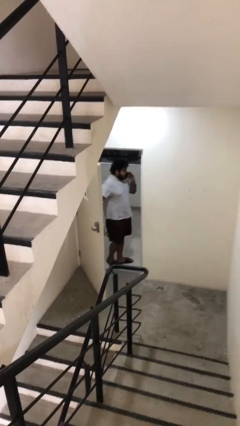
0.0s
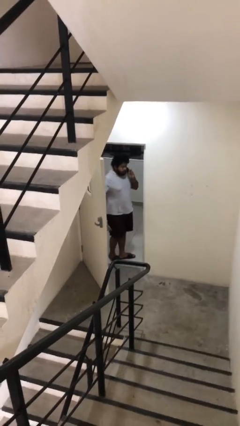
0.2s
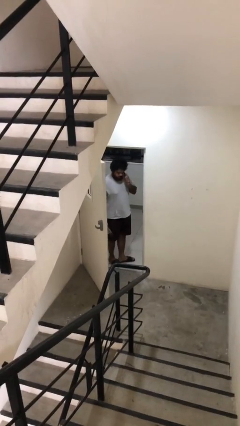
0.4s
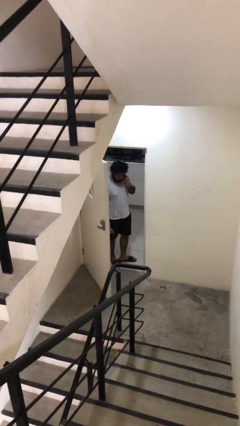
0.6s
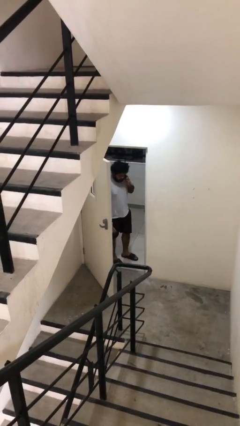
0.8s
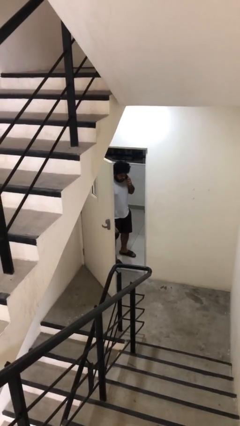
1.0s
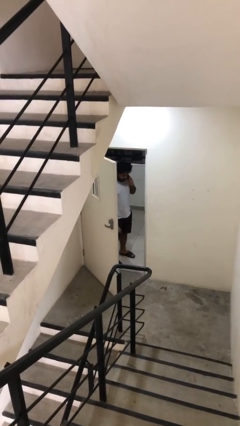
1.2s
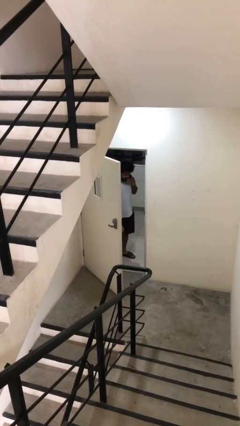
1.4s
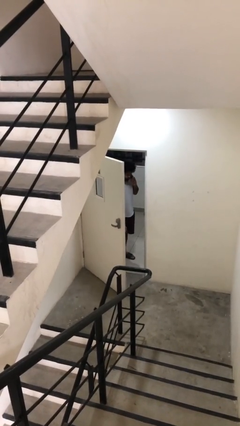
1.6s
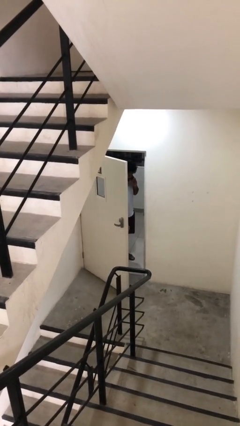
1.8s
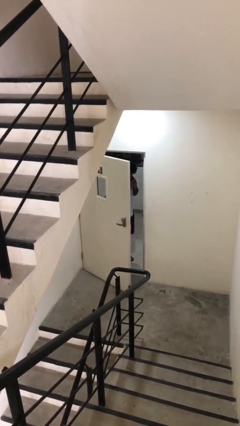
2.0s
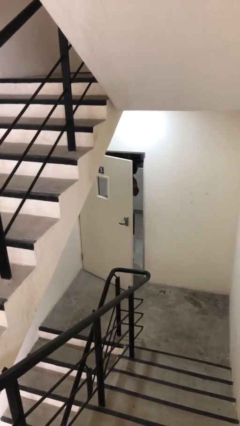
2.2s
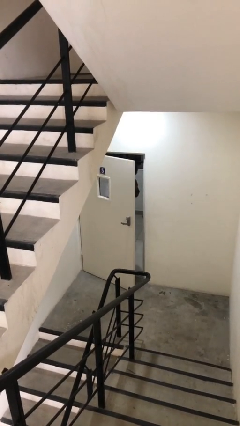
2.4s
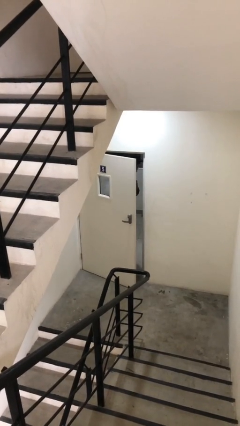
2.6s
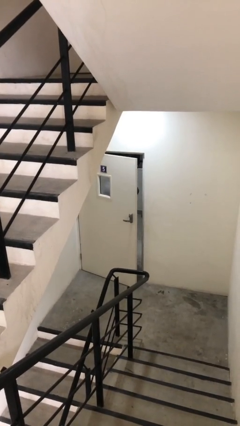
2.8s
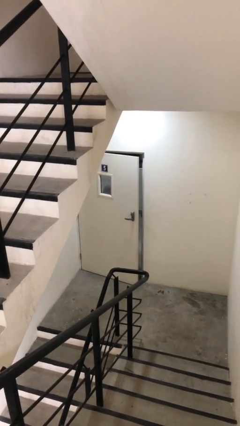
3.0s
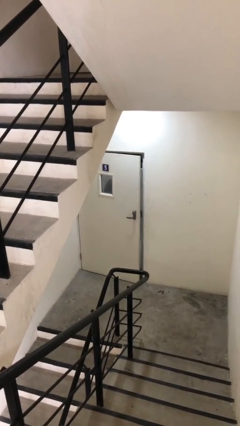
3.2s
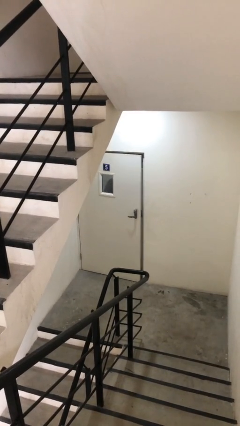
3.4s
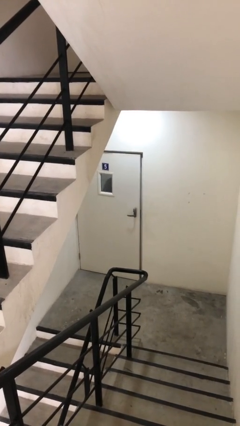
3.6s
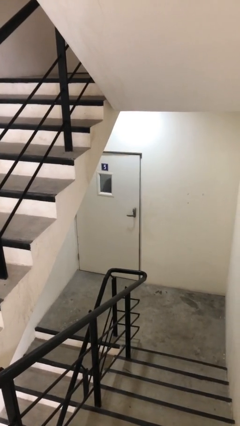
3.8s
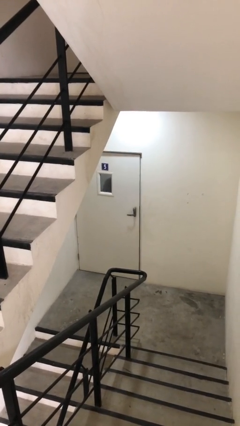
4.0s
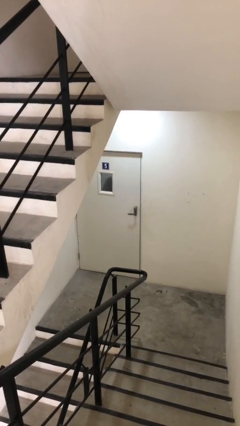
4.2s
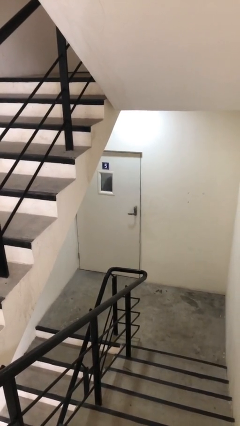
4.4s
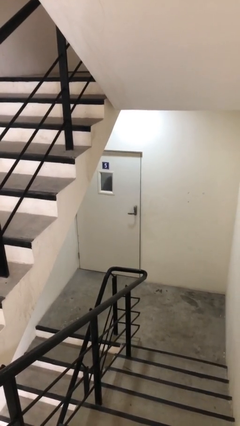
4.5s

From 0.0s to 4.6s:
person closes facility door

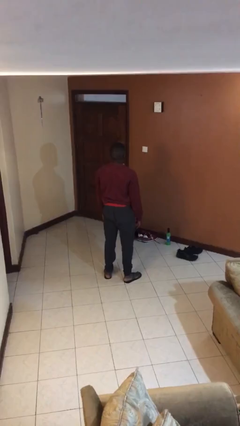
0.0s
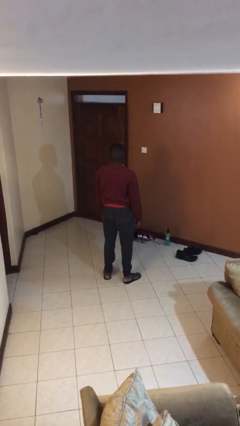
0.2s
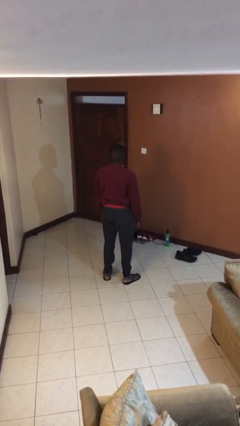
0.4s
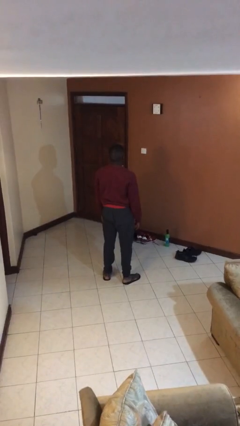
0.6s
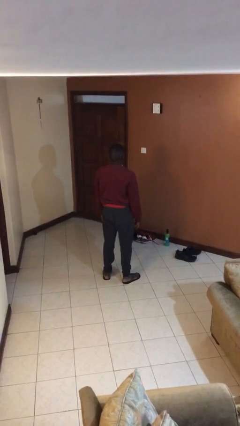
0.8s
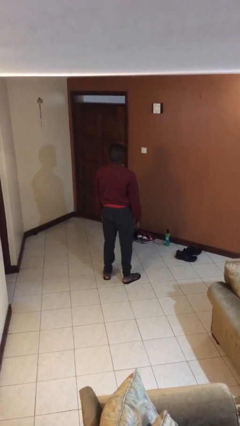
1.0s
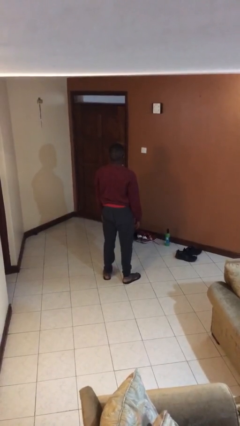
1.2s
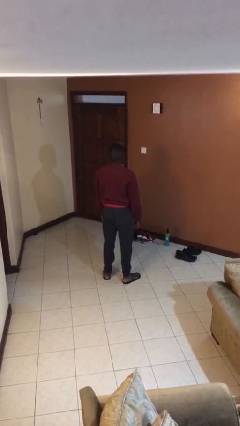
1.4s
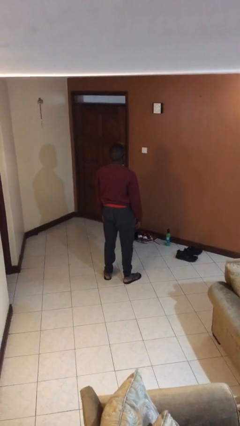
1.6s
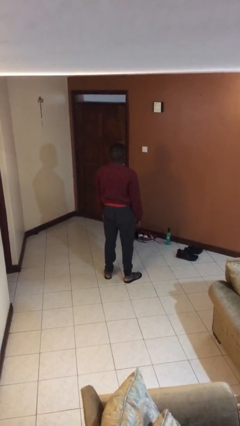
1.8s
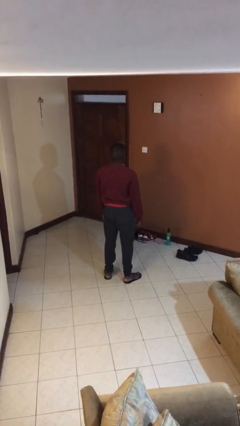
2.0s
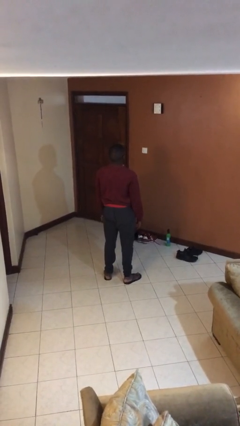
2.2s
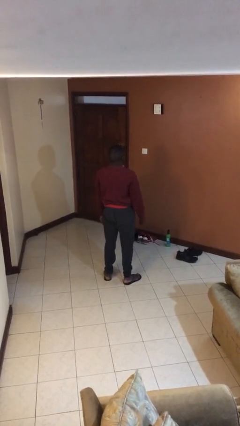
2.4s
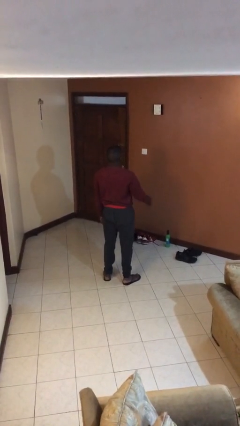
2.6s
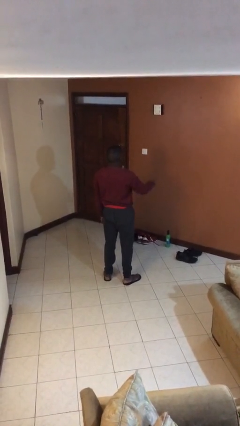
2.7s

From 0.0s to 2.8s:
person gestures swipe down

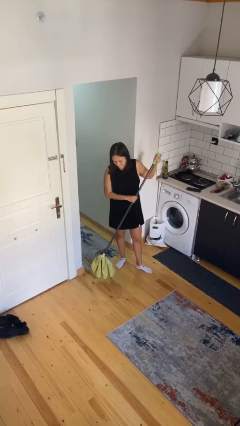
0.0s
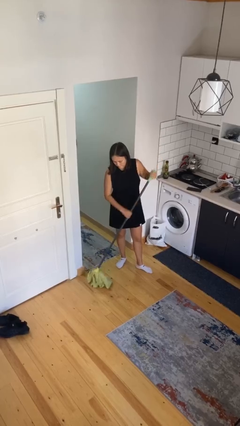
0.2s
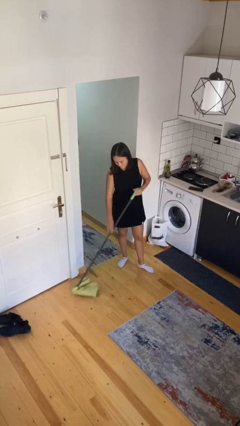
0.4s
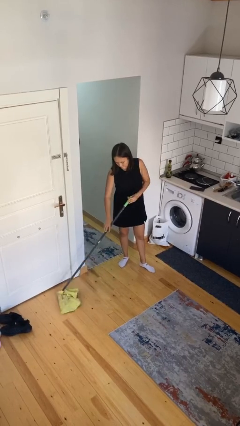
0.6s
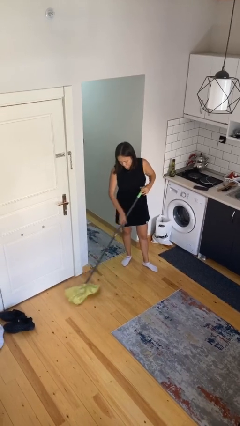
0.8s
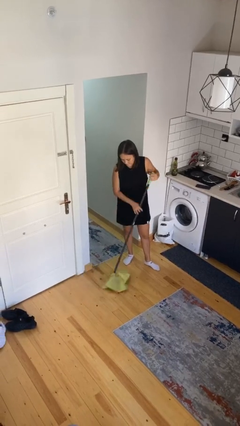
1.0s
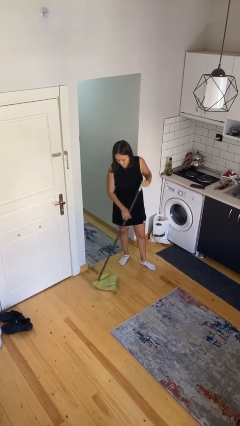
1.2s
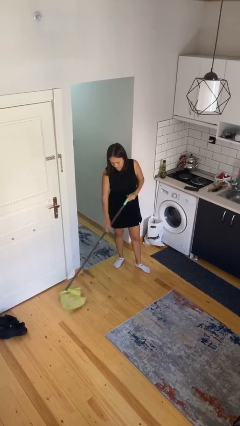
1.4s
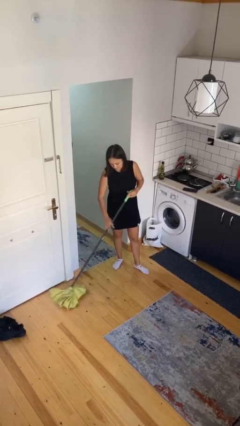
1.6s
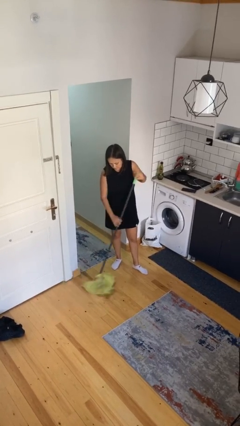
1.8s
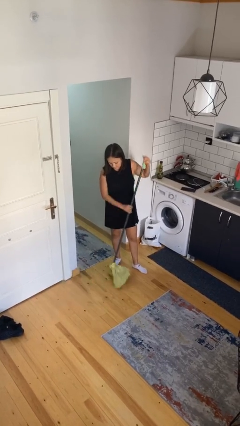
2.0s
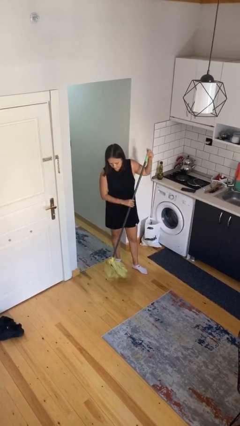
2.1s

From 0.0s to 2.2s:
person sweeps floor

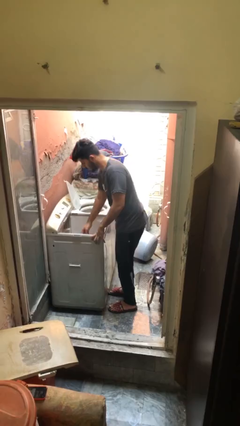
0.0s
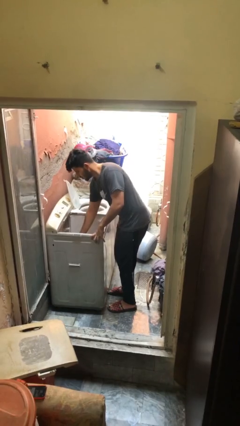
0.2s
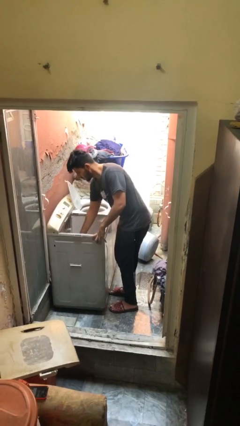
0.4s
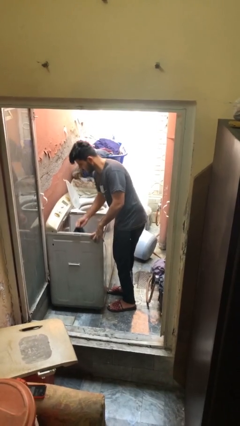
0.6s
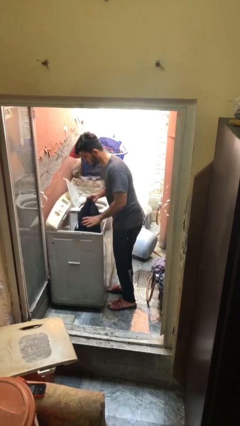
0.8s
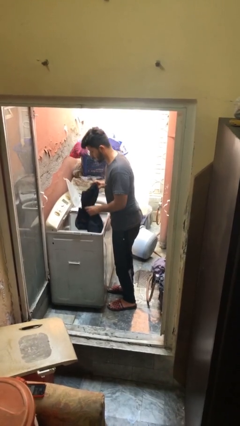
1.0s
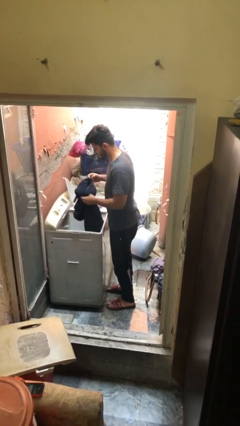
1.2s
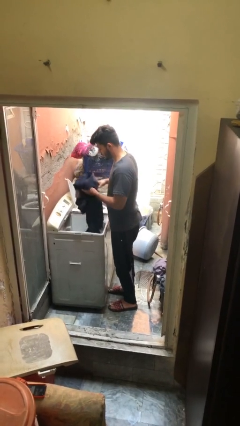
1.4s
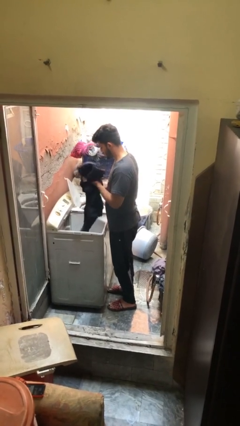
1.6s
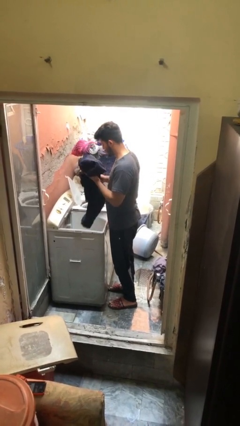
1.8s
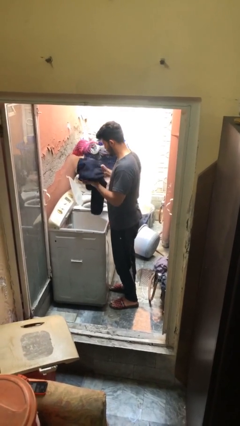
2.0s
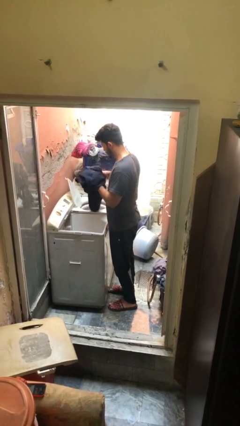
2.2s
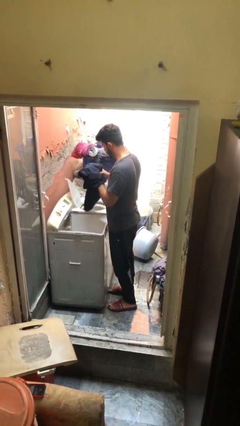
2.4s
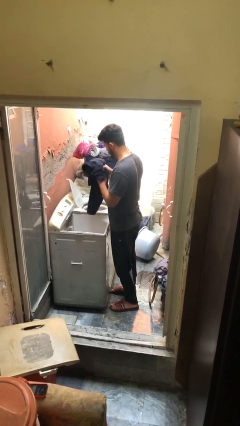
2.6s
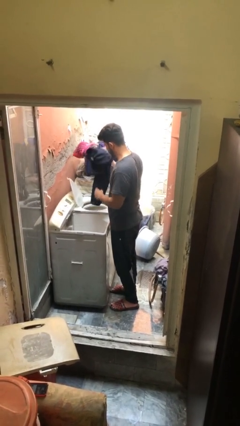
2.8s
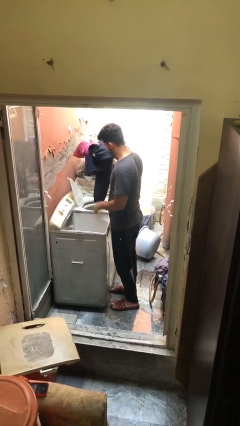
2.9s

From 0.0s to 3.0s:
person unloads clotheswasher

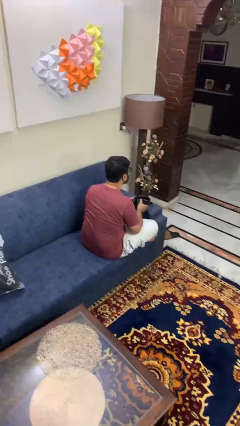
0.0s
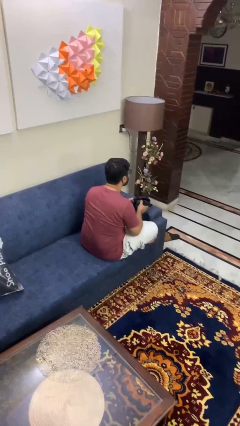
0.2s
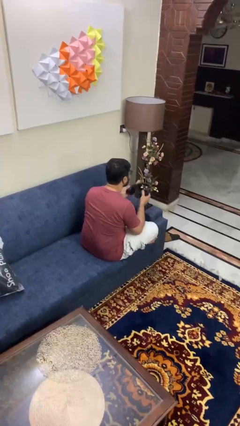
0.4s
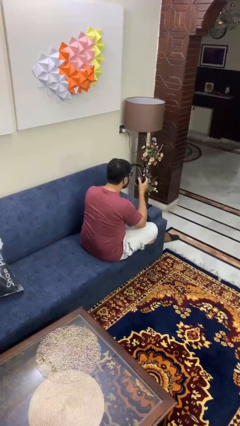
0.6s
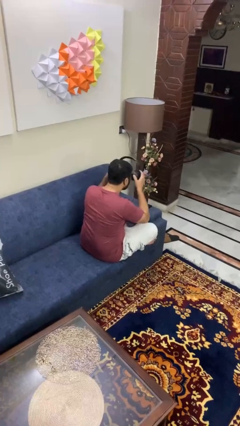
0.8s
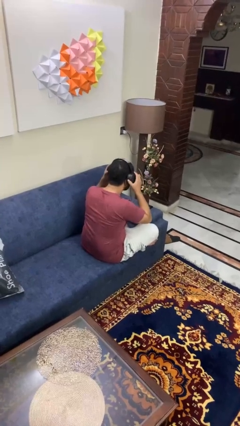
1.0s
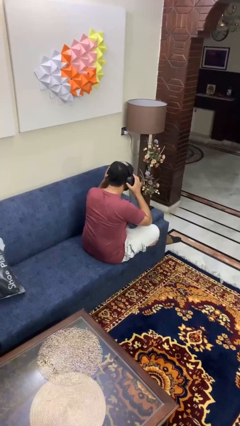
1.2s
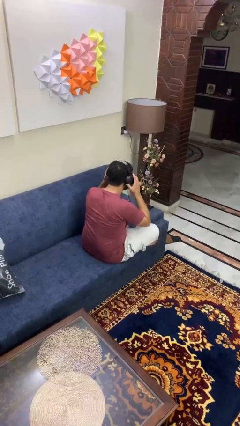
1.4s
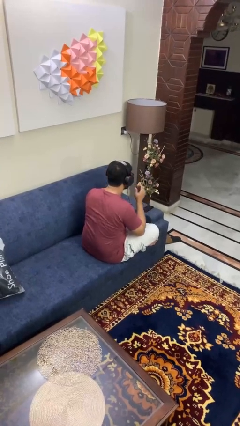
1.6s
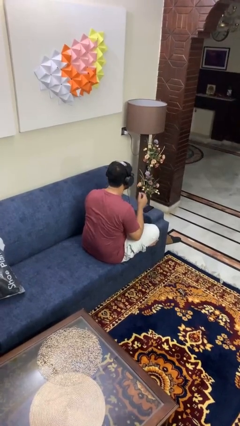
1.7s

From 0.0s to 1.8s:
person puts on headphones

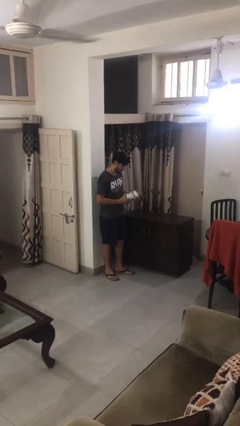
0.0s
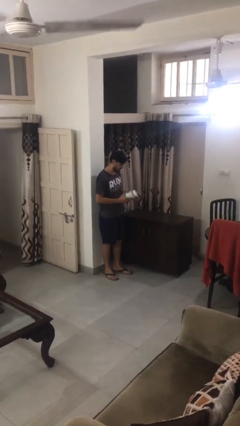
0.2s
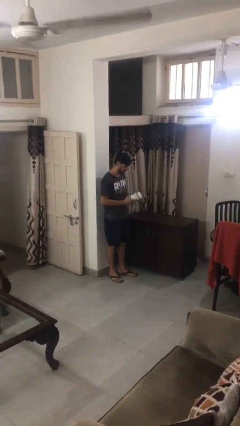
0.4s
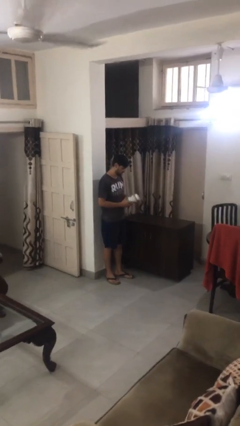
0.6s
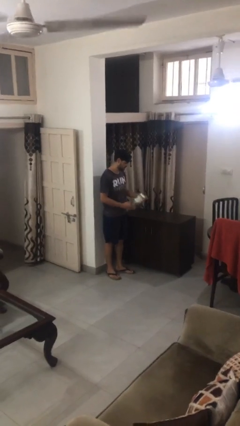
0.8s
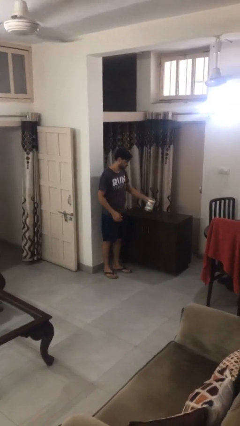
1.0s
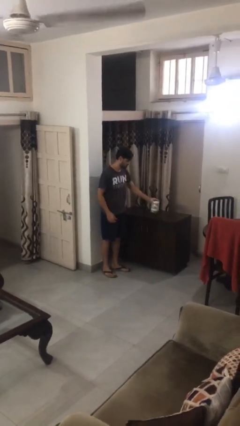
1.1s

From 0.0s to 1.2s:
person puts down object on countertop

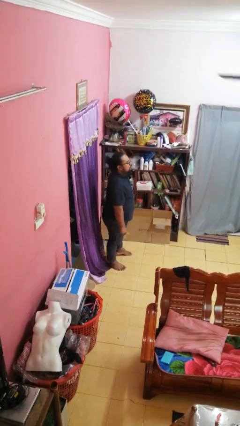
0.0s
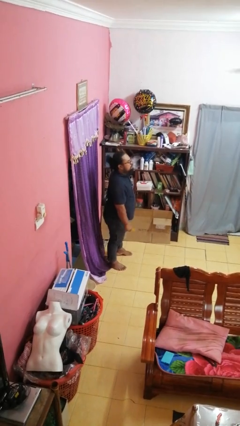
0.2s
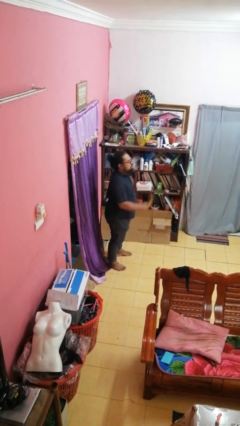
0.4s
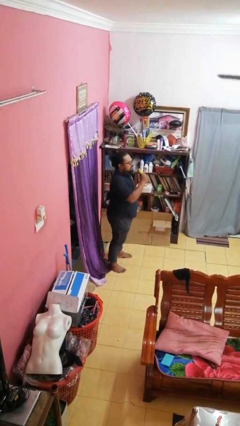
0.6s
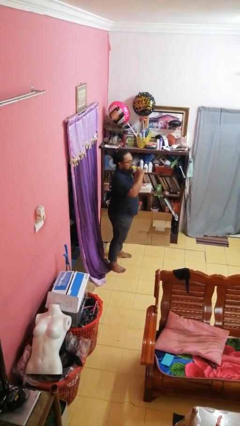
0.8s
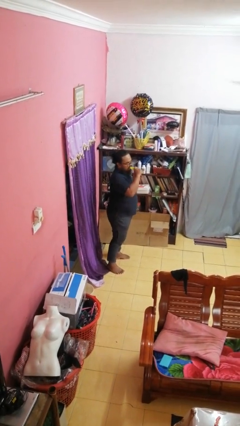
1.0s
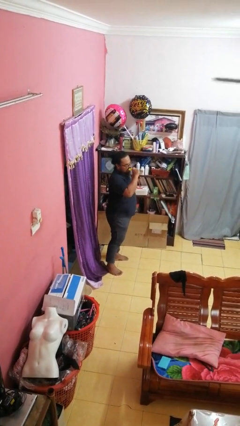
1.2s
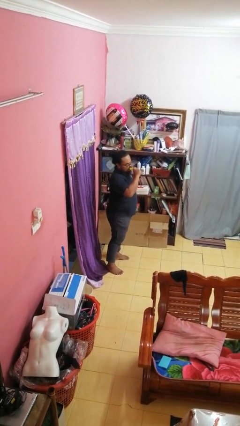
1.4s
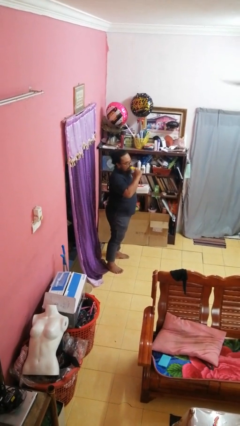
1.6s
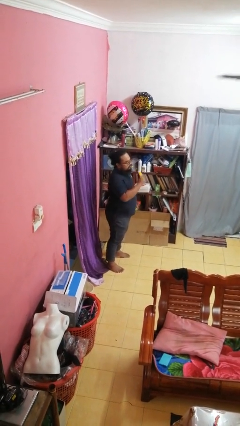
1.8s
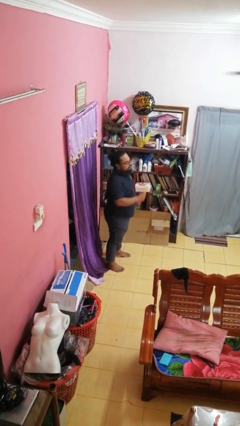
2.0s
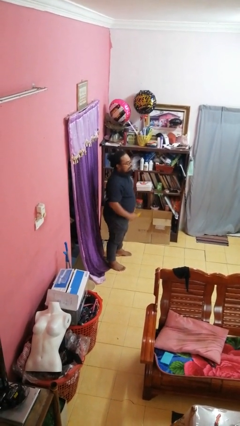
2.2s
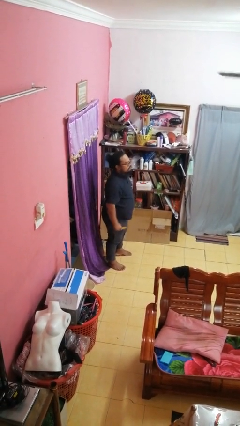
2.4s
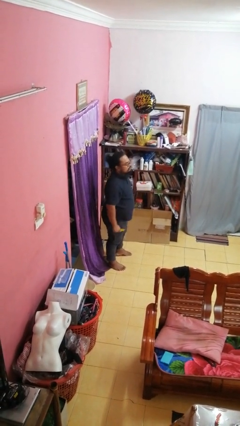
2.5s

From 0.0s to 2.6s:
person eats banana
